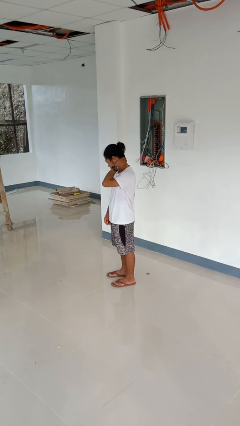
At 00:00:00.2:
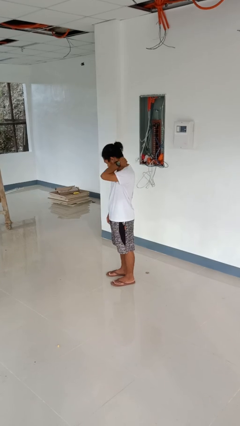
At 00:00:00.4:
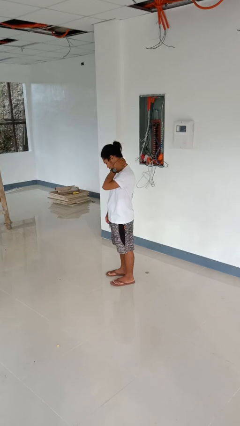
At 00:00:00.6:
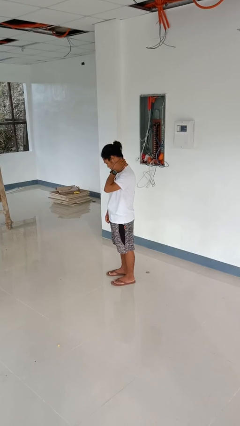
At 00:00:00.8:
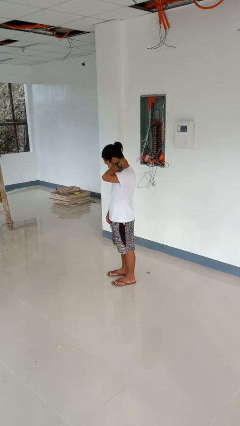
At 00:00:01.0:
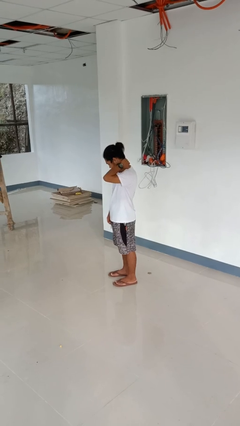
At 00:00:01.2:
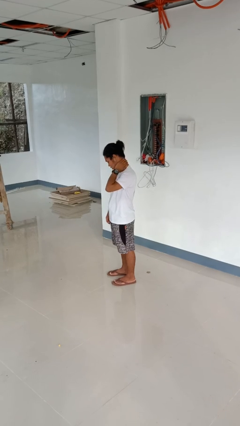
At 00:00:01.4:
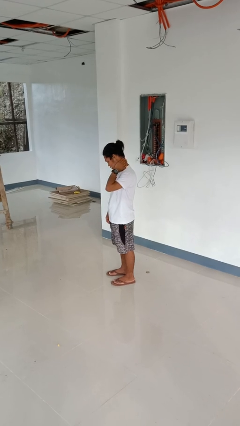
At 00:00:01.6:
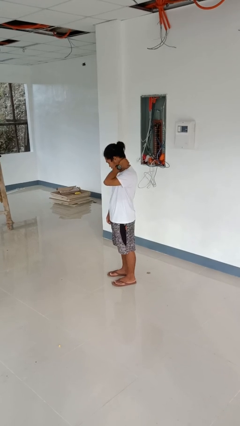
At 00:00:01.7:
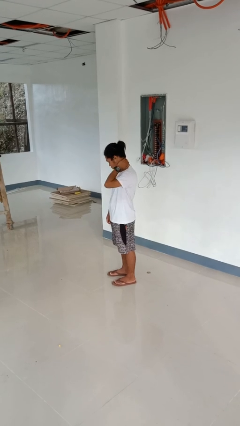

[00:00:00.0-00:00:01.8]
person rubs neck

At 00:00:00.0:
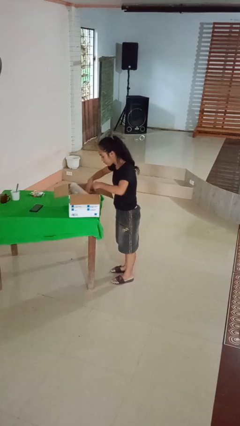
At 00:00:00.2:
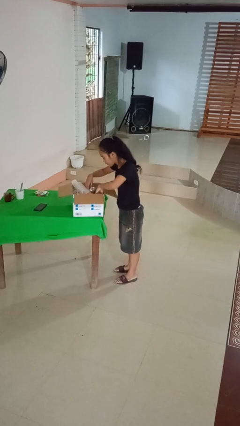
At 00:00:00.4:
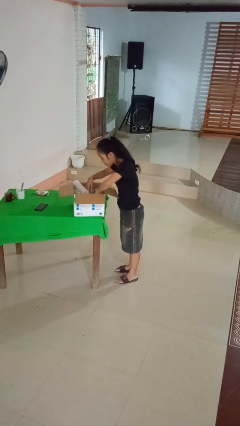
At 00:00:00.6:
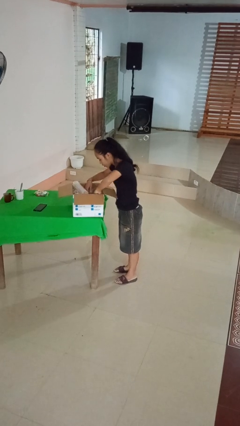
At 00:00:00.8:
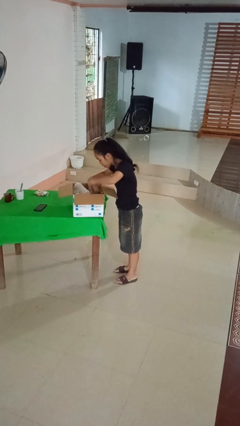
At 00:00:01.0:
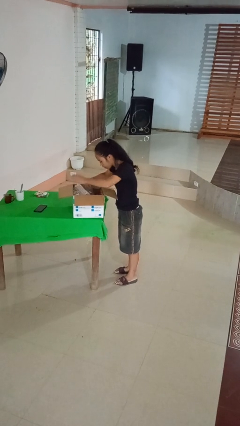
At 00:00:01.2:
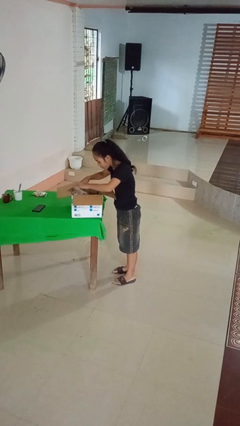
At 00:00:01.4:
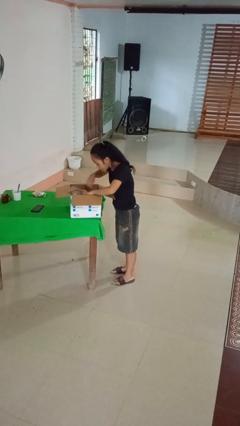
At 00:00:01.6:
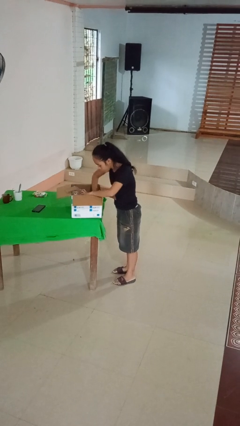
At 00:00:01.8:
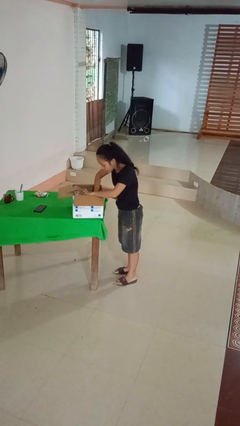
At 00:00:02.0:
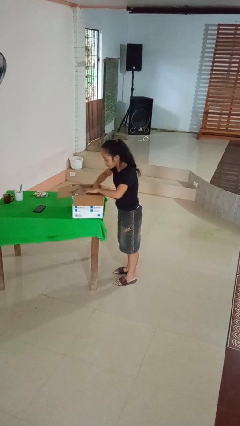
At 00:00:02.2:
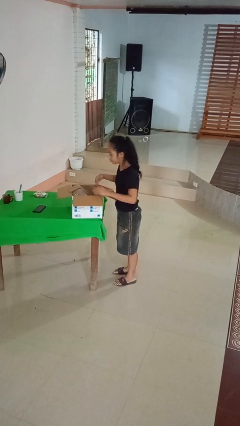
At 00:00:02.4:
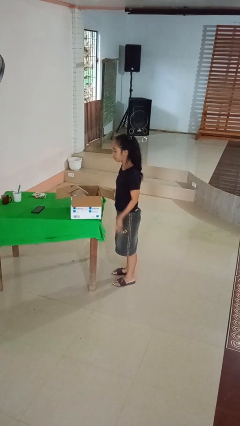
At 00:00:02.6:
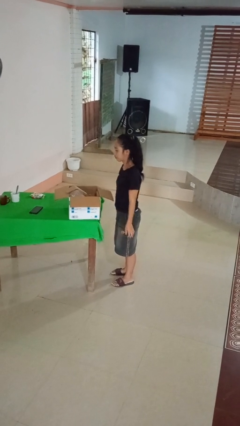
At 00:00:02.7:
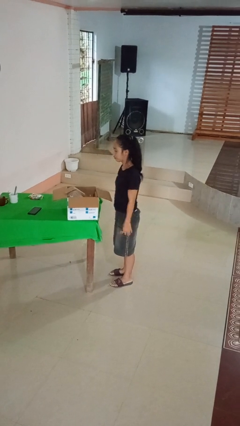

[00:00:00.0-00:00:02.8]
person searches in box

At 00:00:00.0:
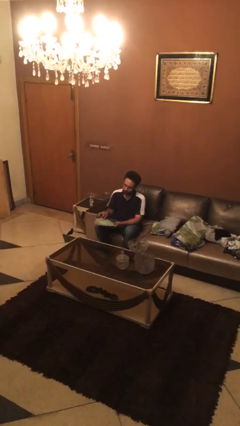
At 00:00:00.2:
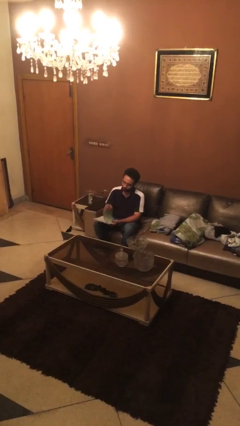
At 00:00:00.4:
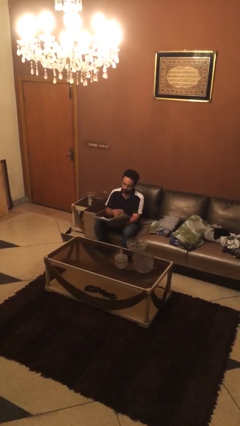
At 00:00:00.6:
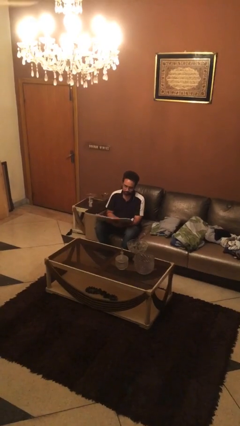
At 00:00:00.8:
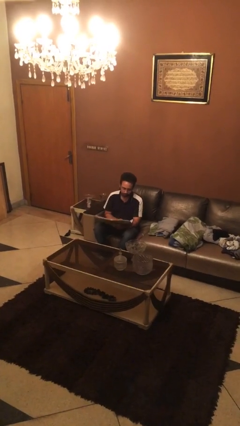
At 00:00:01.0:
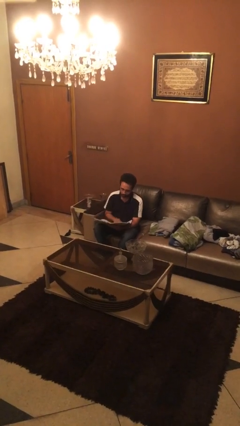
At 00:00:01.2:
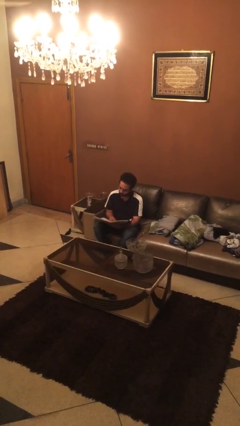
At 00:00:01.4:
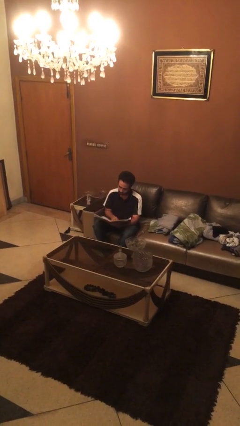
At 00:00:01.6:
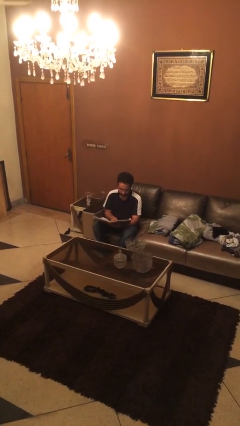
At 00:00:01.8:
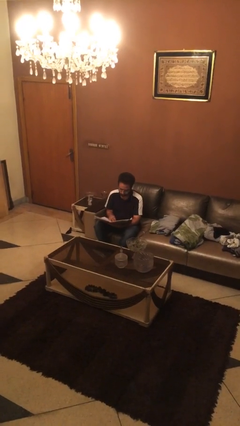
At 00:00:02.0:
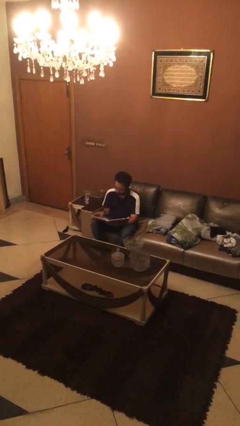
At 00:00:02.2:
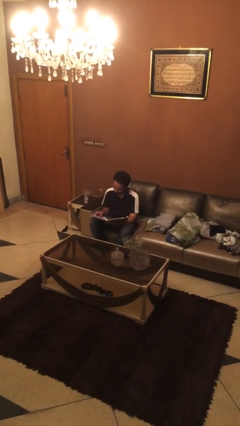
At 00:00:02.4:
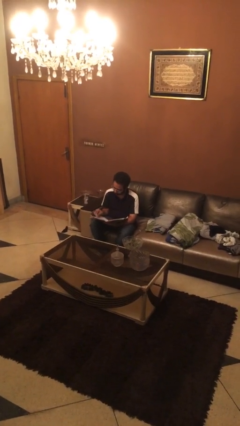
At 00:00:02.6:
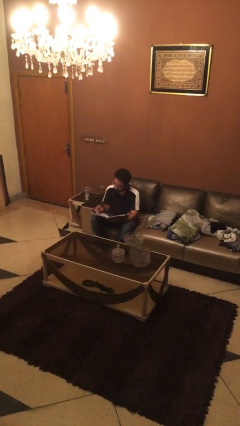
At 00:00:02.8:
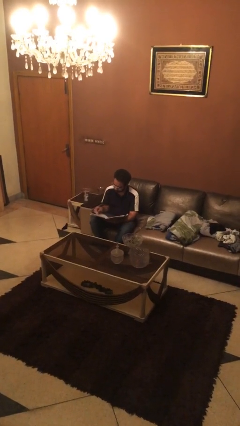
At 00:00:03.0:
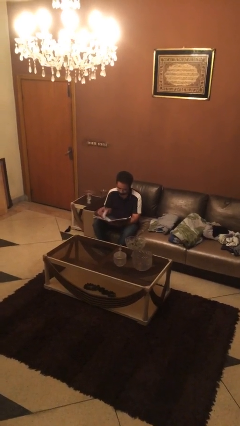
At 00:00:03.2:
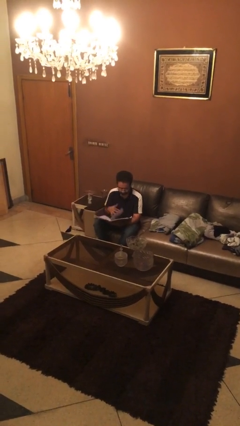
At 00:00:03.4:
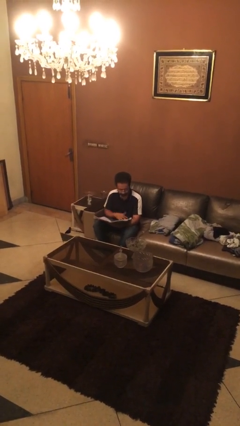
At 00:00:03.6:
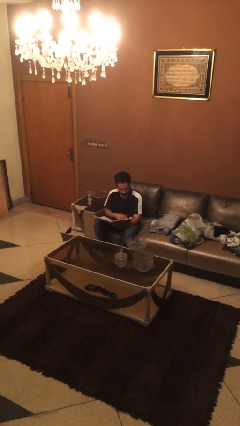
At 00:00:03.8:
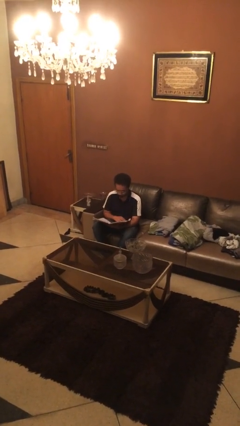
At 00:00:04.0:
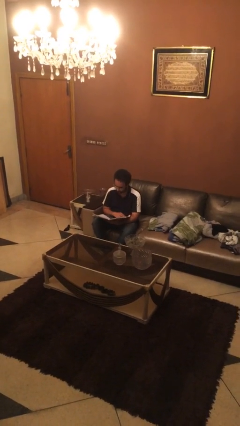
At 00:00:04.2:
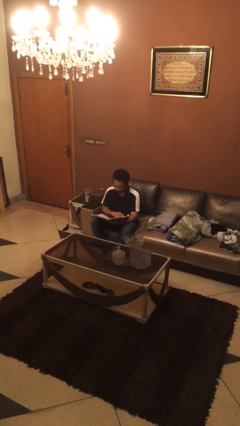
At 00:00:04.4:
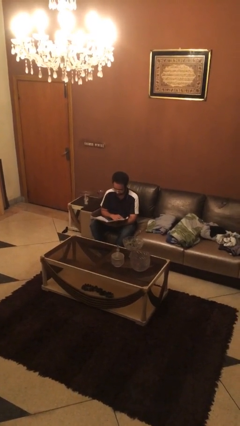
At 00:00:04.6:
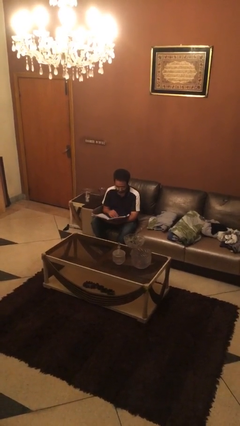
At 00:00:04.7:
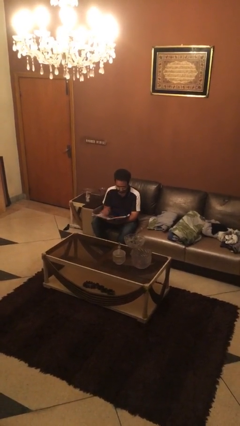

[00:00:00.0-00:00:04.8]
person reads document

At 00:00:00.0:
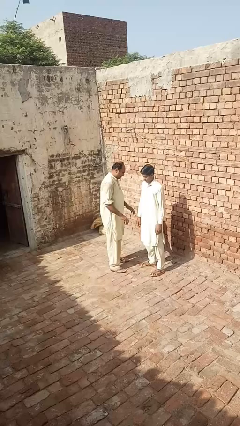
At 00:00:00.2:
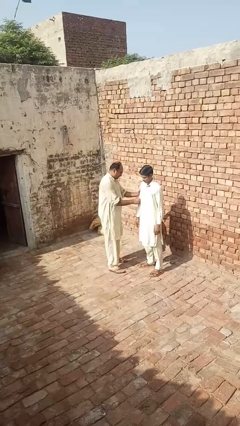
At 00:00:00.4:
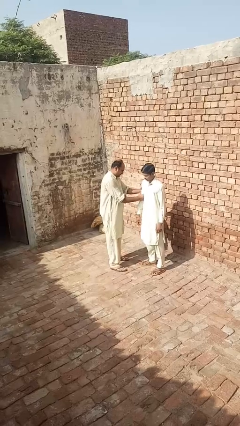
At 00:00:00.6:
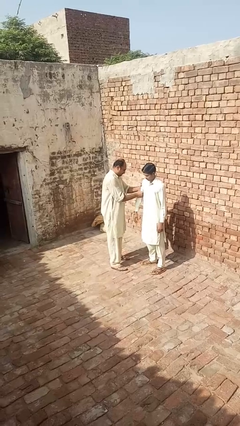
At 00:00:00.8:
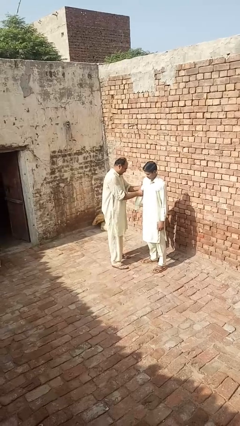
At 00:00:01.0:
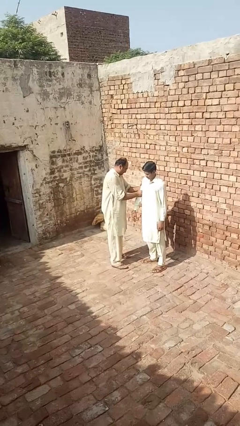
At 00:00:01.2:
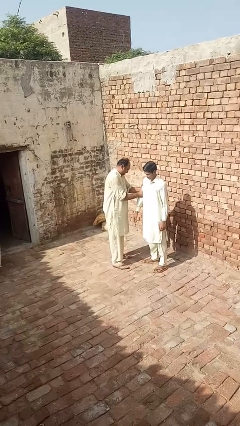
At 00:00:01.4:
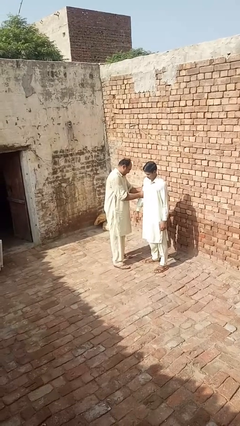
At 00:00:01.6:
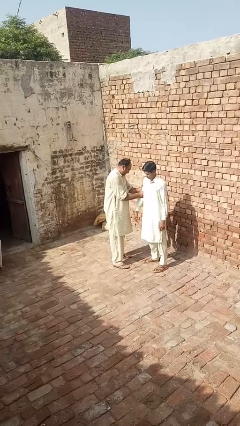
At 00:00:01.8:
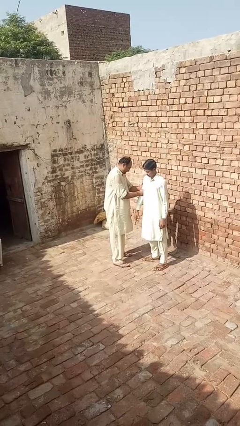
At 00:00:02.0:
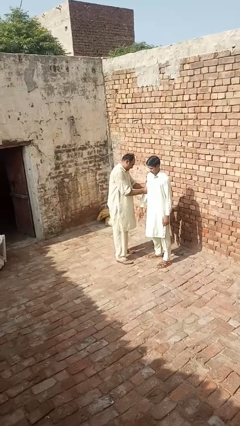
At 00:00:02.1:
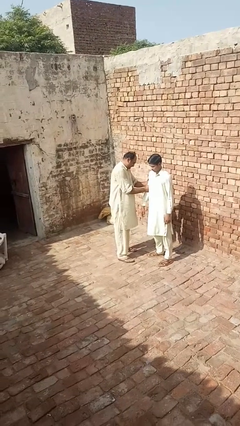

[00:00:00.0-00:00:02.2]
person grabs person by bicep

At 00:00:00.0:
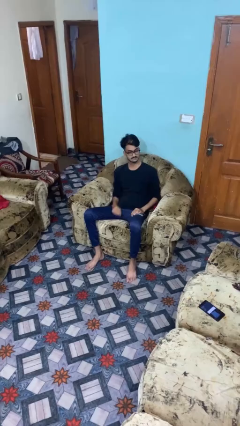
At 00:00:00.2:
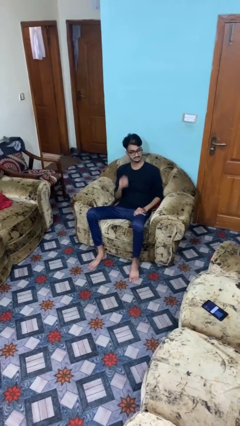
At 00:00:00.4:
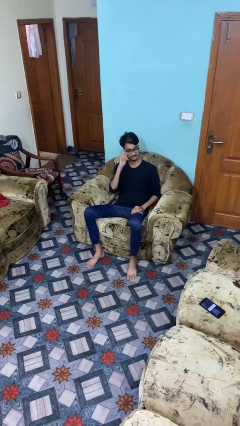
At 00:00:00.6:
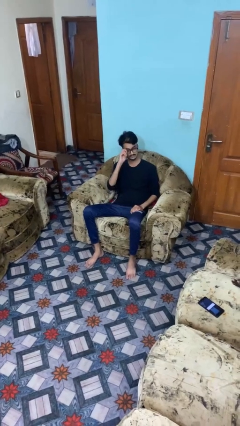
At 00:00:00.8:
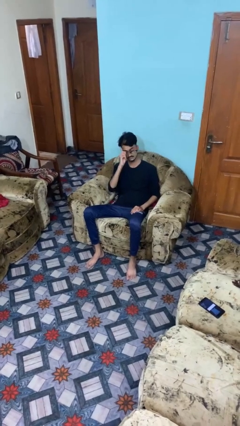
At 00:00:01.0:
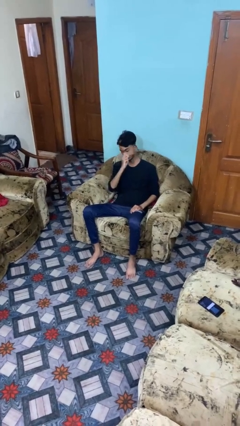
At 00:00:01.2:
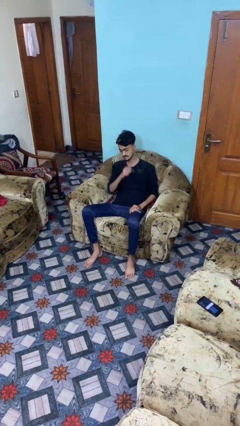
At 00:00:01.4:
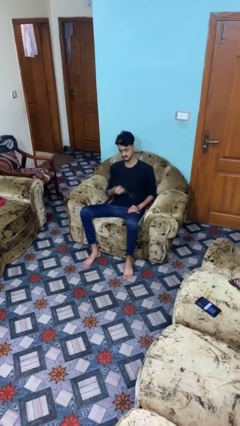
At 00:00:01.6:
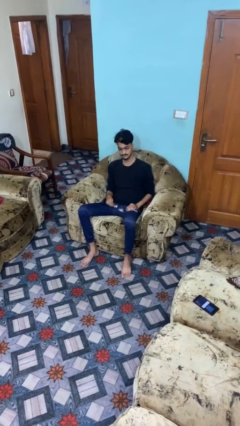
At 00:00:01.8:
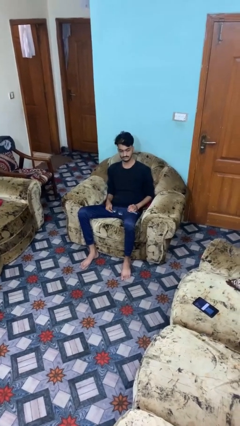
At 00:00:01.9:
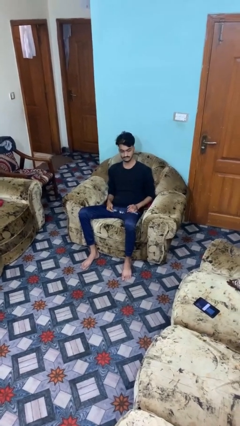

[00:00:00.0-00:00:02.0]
person takes off glasses

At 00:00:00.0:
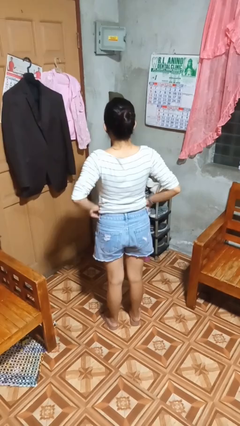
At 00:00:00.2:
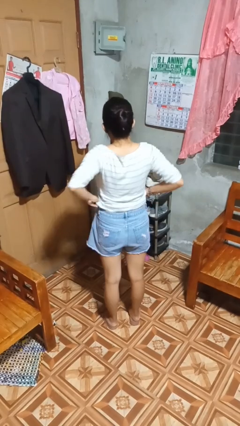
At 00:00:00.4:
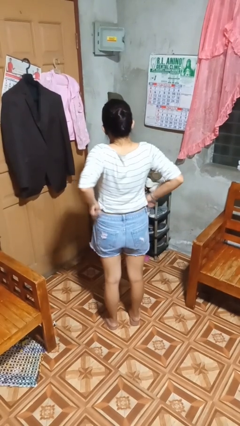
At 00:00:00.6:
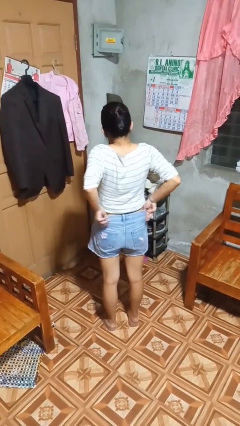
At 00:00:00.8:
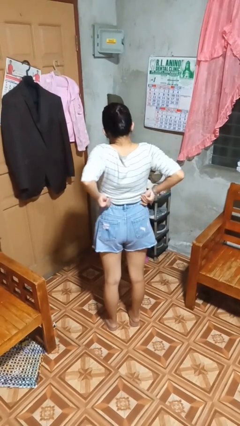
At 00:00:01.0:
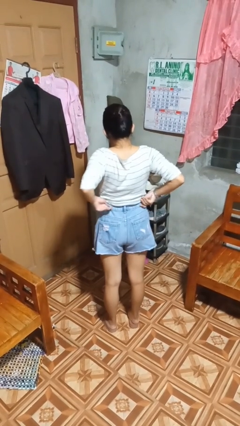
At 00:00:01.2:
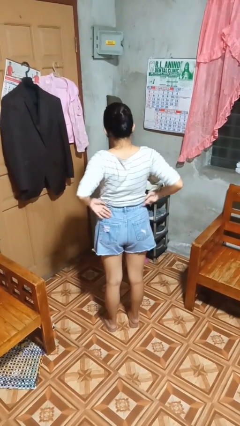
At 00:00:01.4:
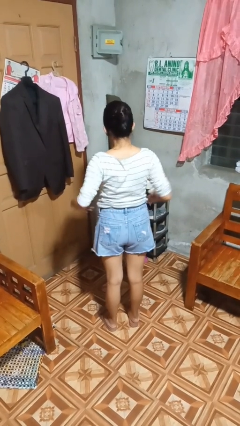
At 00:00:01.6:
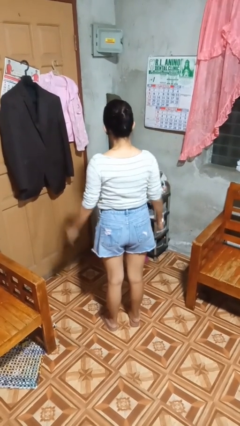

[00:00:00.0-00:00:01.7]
person hikes up pants

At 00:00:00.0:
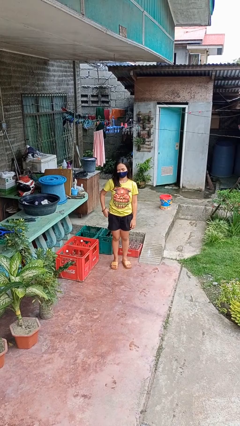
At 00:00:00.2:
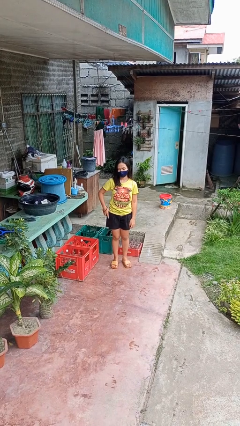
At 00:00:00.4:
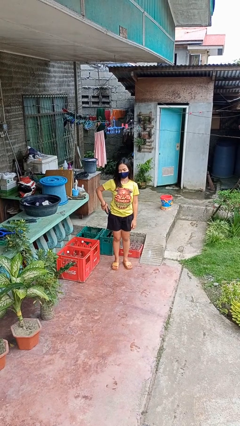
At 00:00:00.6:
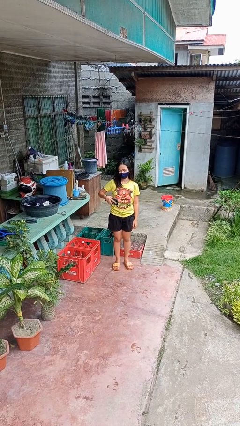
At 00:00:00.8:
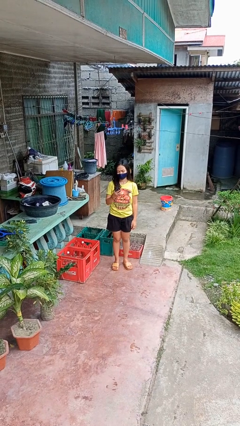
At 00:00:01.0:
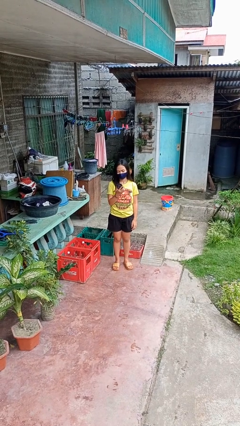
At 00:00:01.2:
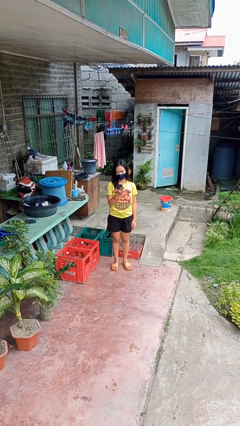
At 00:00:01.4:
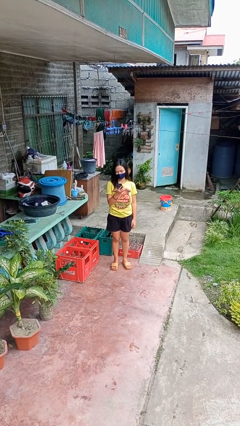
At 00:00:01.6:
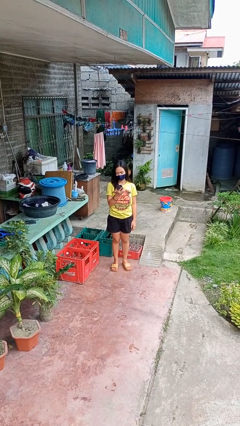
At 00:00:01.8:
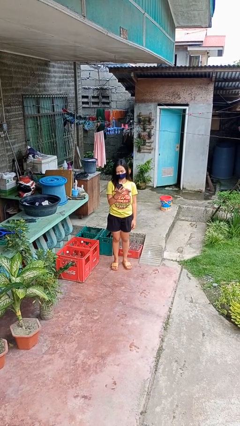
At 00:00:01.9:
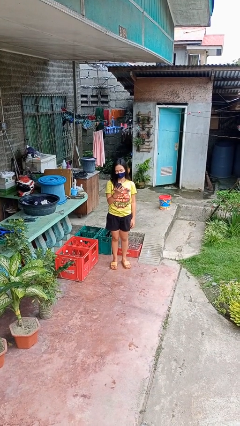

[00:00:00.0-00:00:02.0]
person takes phone from pocket
